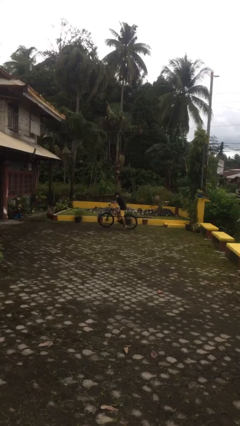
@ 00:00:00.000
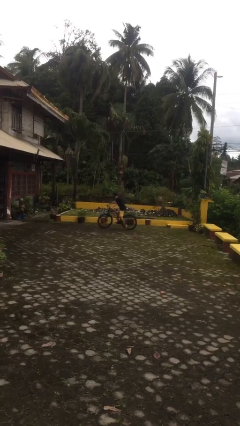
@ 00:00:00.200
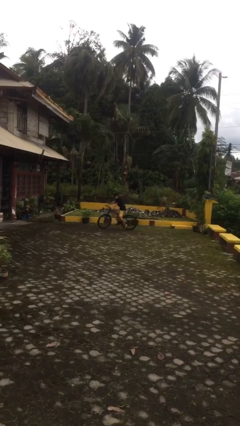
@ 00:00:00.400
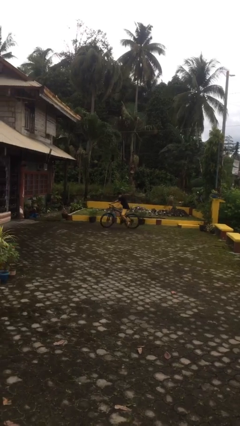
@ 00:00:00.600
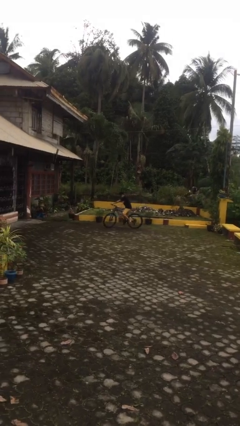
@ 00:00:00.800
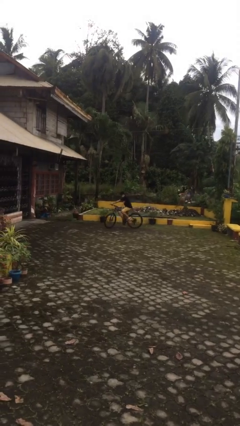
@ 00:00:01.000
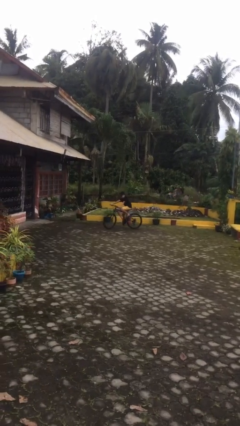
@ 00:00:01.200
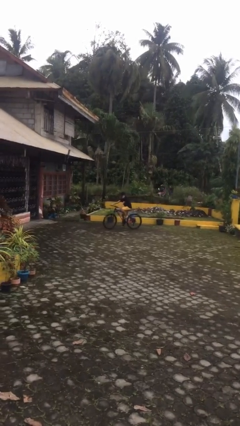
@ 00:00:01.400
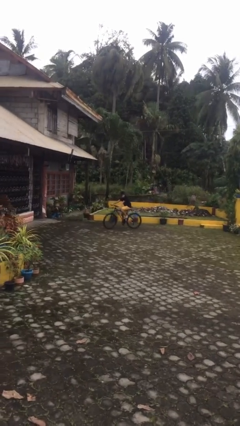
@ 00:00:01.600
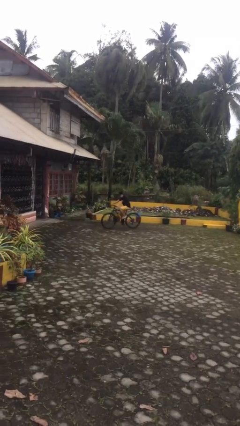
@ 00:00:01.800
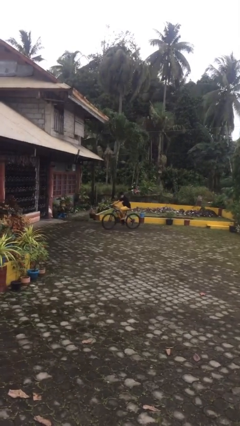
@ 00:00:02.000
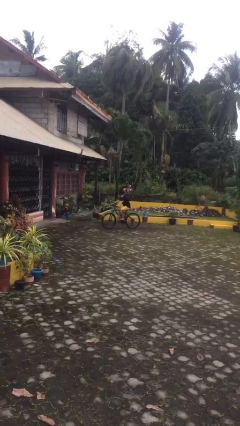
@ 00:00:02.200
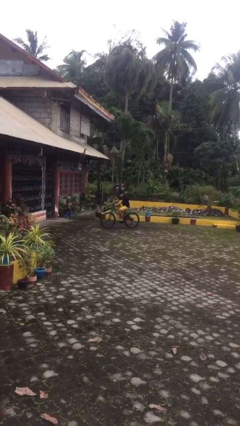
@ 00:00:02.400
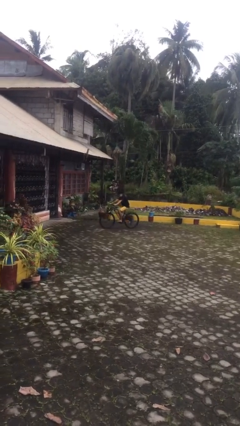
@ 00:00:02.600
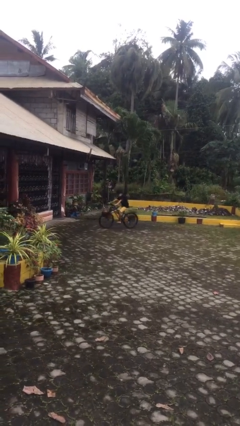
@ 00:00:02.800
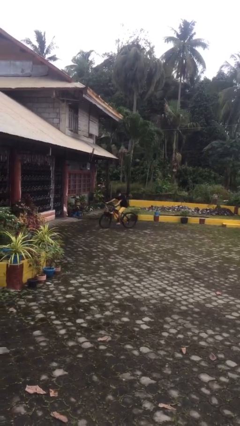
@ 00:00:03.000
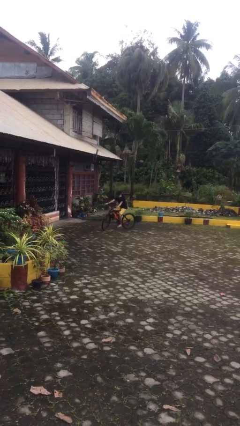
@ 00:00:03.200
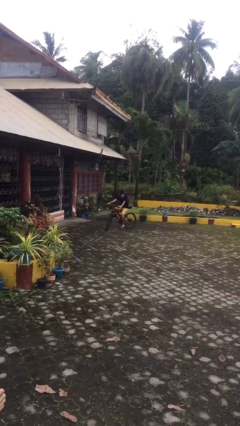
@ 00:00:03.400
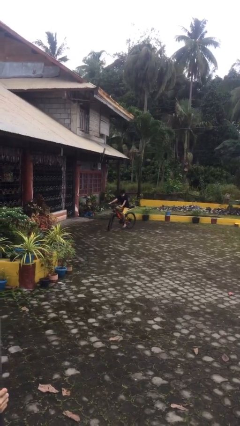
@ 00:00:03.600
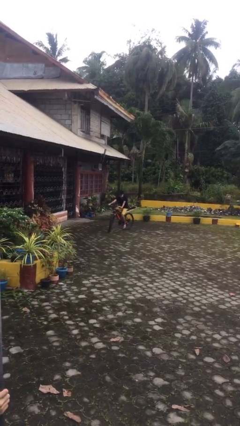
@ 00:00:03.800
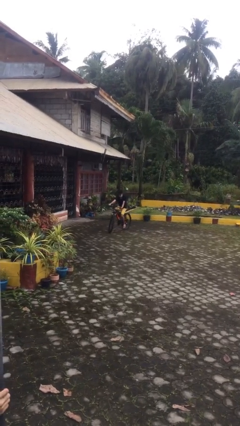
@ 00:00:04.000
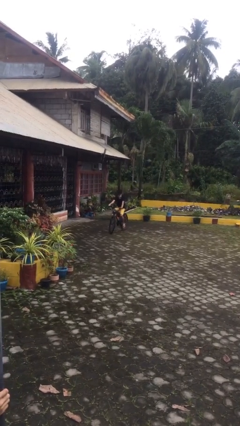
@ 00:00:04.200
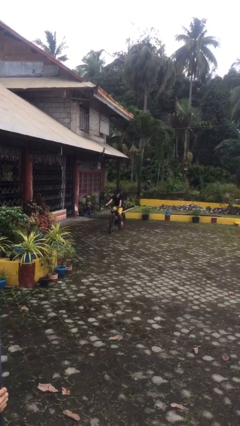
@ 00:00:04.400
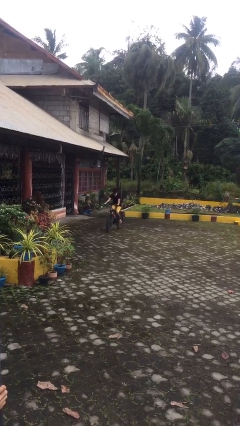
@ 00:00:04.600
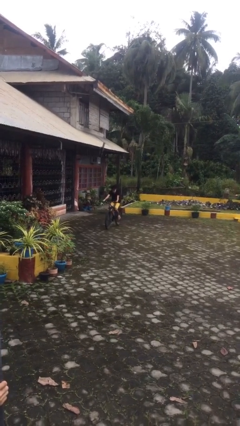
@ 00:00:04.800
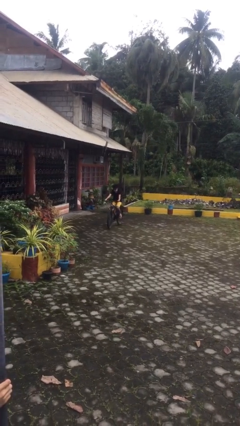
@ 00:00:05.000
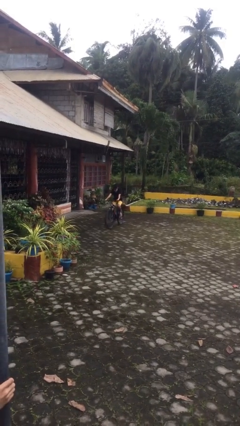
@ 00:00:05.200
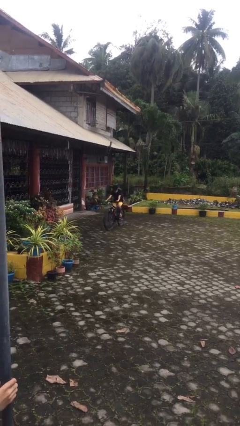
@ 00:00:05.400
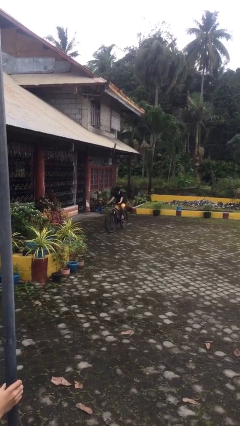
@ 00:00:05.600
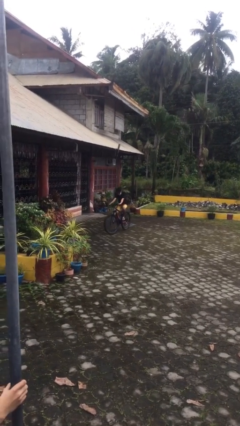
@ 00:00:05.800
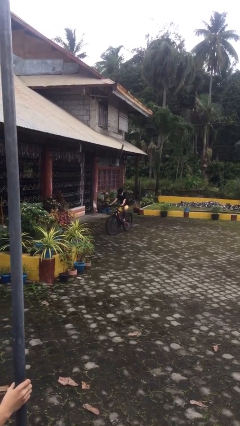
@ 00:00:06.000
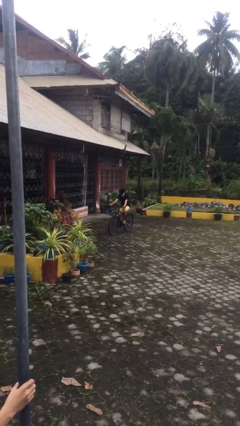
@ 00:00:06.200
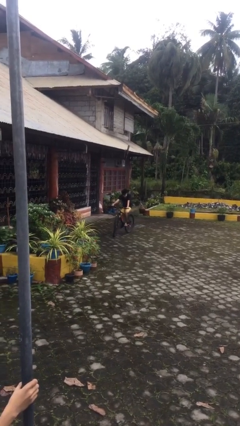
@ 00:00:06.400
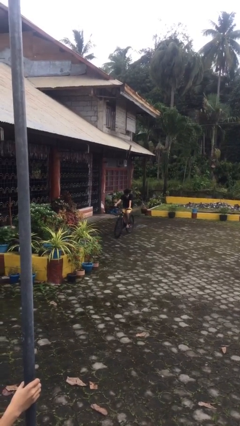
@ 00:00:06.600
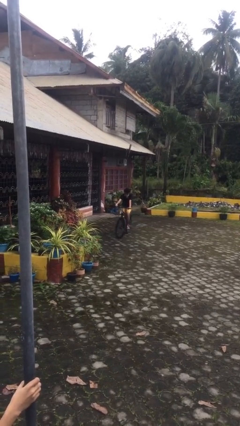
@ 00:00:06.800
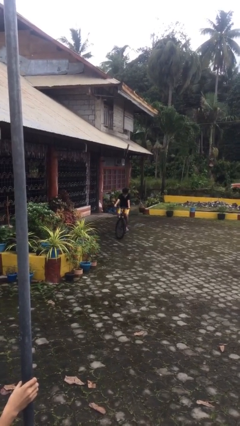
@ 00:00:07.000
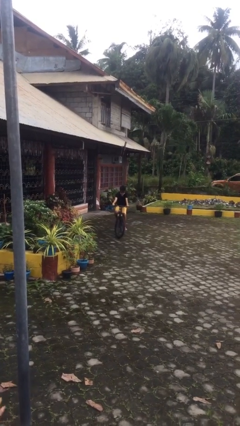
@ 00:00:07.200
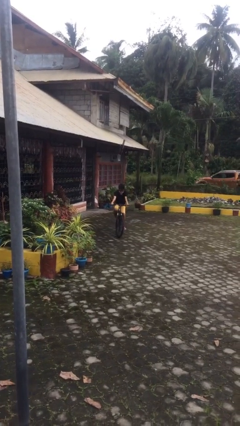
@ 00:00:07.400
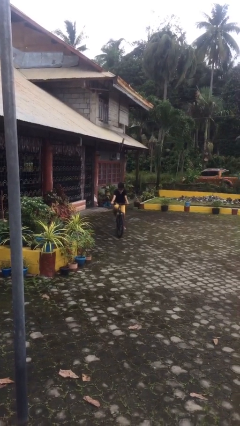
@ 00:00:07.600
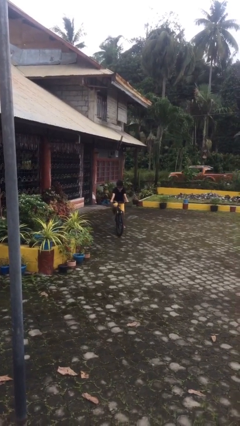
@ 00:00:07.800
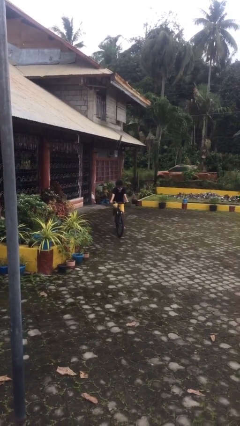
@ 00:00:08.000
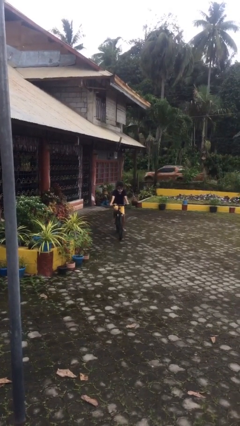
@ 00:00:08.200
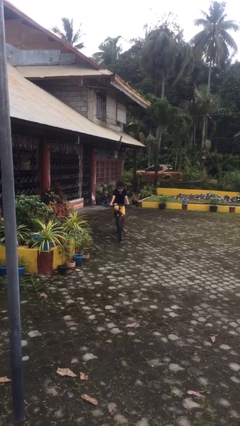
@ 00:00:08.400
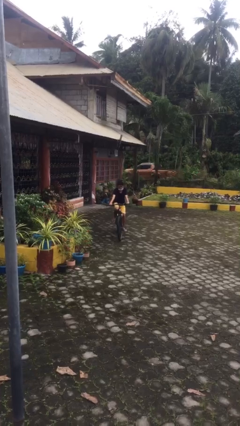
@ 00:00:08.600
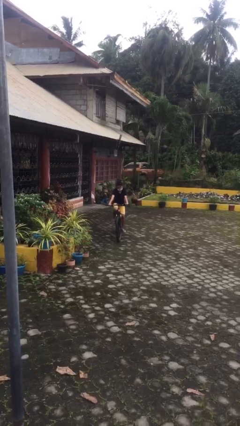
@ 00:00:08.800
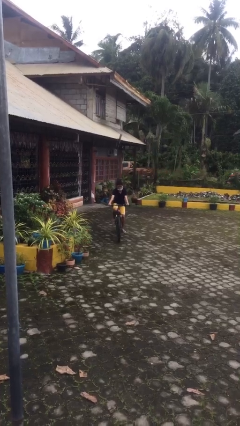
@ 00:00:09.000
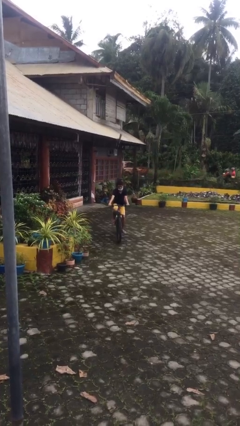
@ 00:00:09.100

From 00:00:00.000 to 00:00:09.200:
person rides bicycle

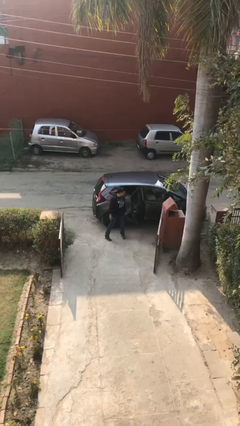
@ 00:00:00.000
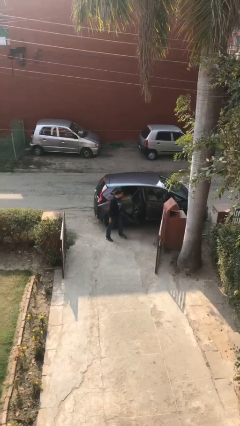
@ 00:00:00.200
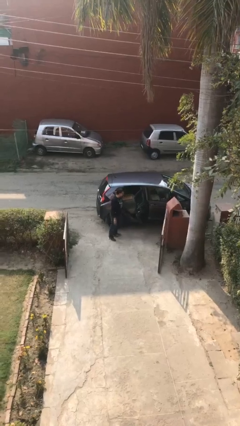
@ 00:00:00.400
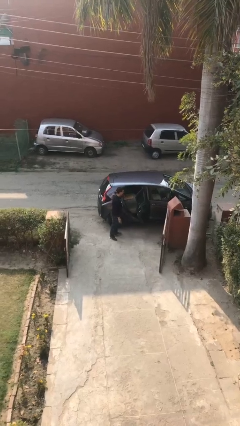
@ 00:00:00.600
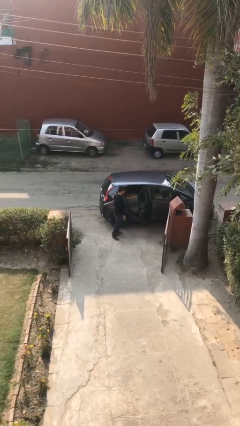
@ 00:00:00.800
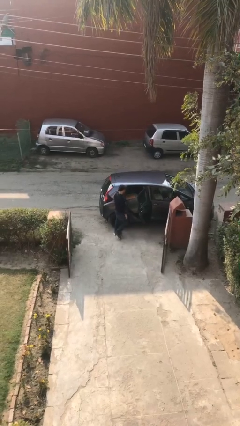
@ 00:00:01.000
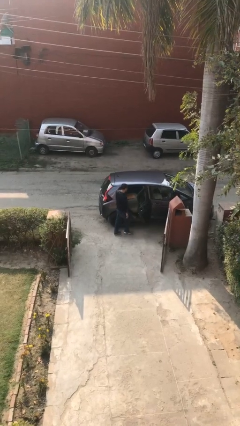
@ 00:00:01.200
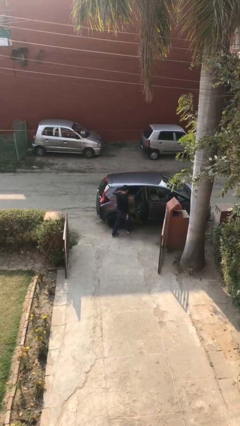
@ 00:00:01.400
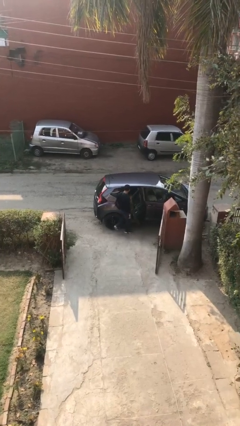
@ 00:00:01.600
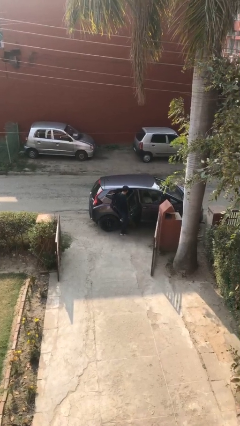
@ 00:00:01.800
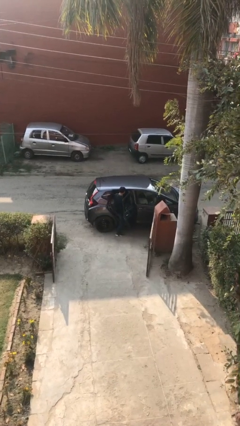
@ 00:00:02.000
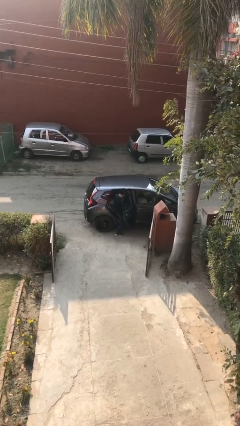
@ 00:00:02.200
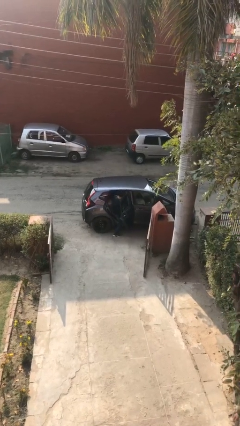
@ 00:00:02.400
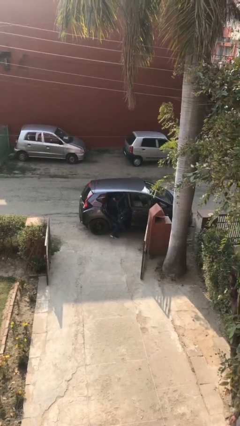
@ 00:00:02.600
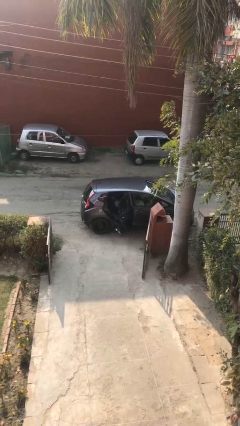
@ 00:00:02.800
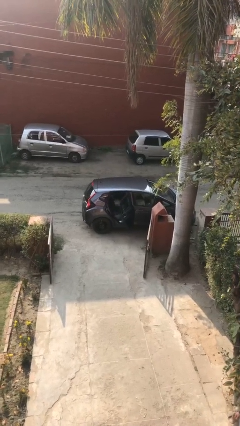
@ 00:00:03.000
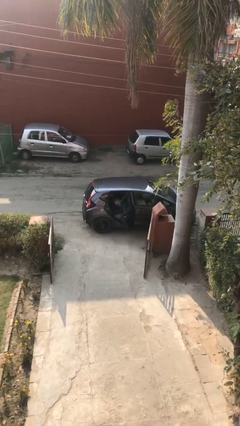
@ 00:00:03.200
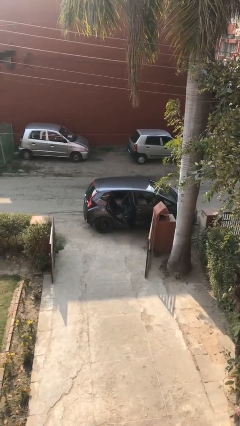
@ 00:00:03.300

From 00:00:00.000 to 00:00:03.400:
person enters car

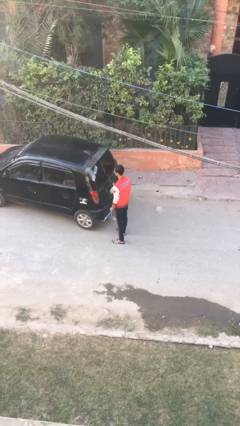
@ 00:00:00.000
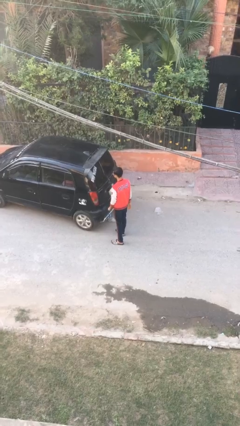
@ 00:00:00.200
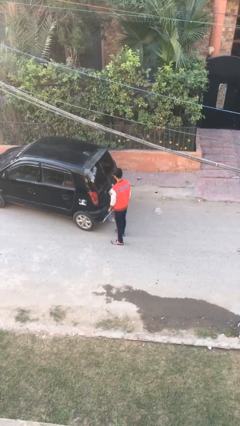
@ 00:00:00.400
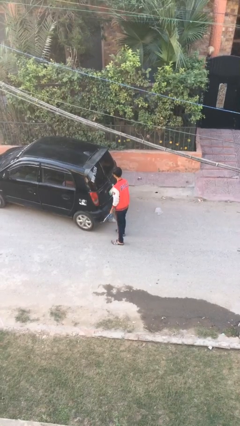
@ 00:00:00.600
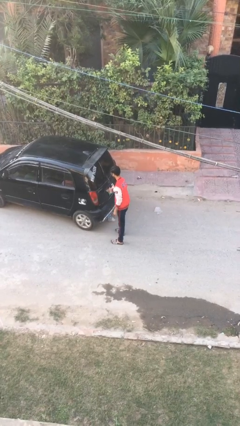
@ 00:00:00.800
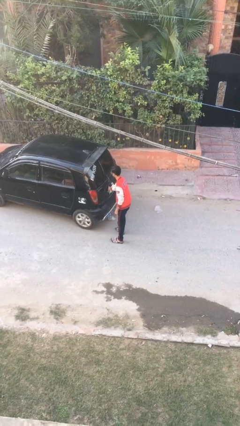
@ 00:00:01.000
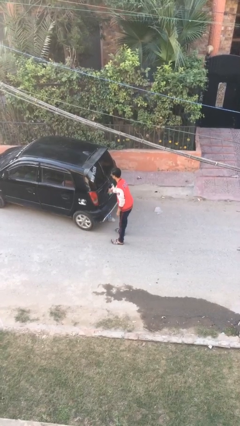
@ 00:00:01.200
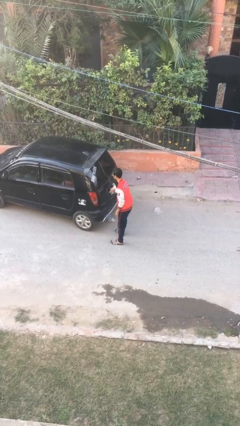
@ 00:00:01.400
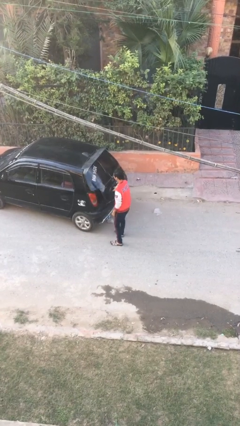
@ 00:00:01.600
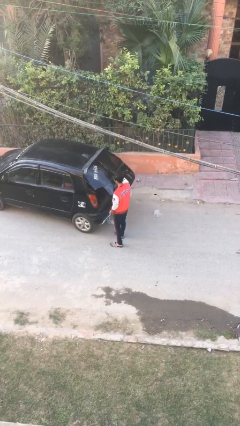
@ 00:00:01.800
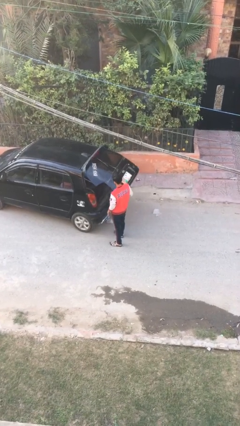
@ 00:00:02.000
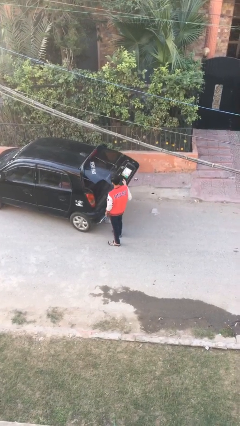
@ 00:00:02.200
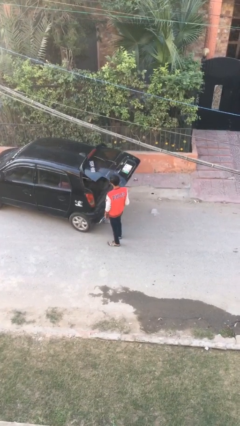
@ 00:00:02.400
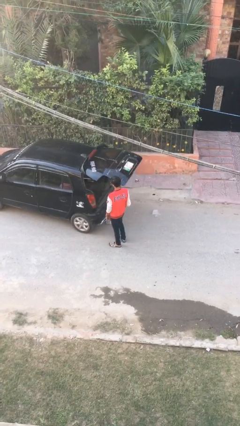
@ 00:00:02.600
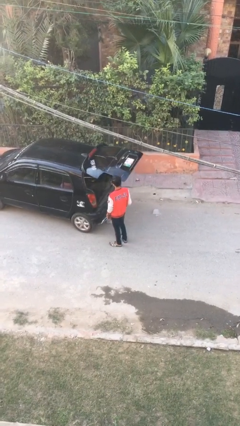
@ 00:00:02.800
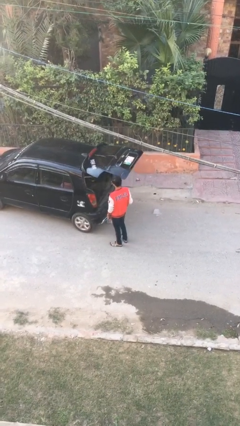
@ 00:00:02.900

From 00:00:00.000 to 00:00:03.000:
person opens car trunk

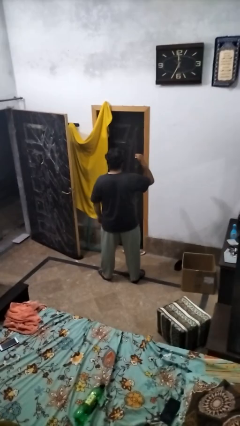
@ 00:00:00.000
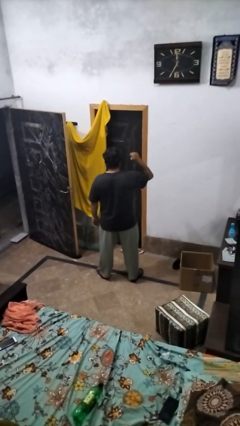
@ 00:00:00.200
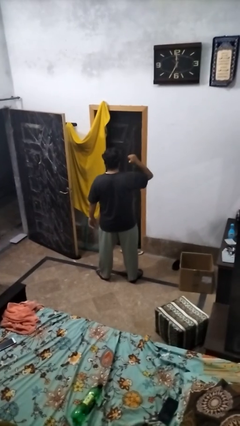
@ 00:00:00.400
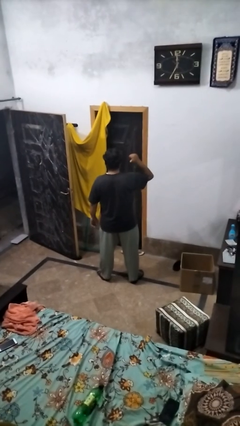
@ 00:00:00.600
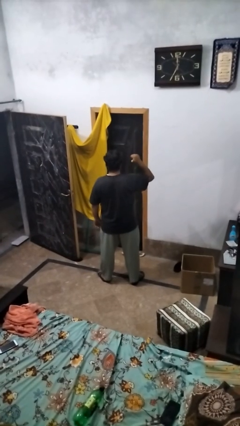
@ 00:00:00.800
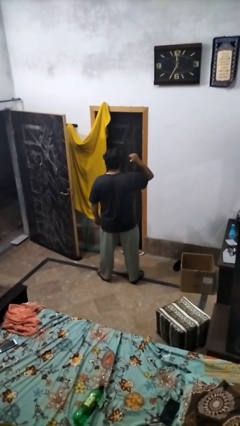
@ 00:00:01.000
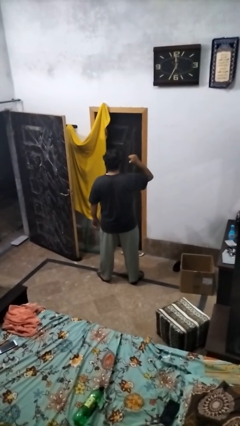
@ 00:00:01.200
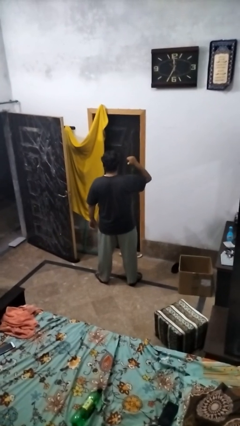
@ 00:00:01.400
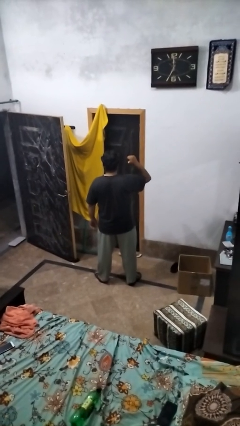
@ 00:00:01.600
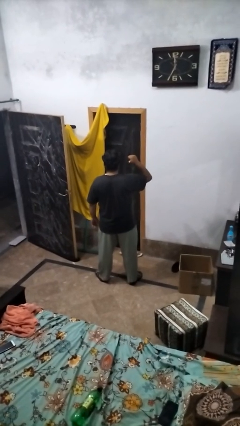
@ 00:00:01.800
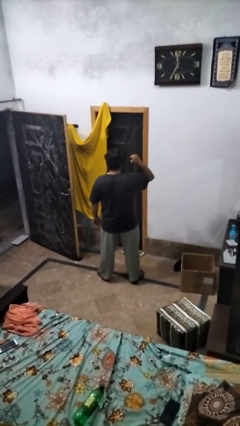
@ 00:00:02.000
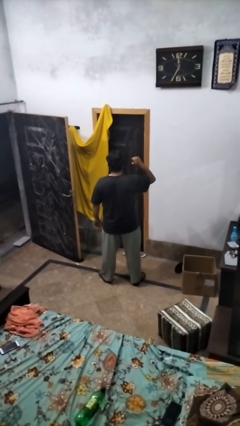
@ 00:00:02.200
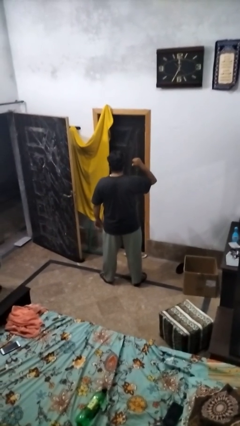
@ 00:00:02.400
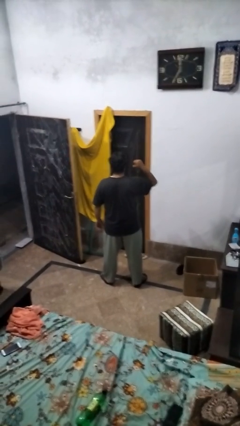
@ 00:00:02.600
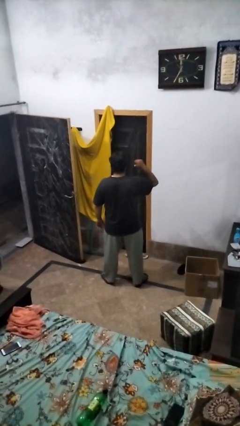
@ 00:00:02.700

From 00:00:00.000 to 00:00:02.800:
person gestures behind me
